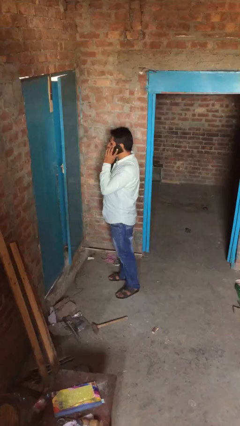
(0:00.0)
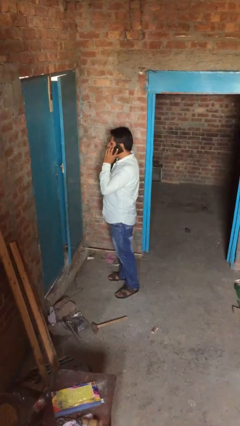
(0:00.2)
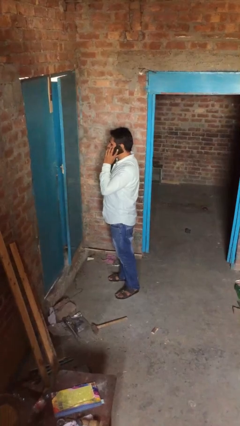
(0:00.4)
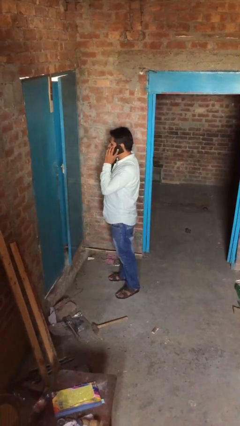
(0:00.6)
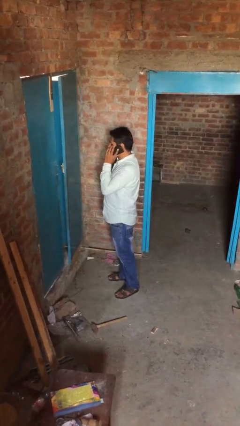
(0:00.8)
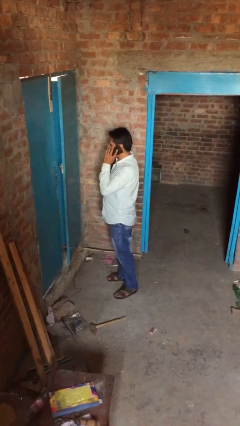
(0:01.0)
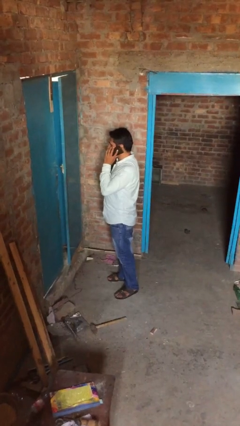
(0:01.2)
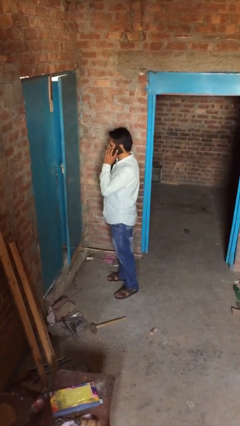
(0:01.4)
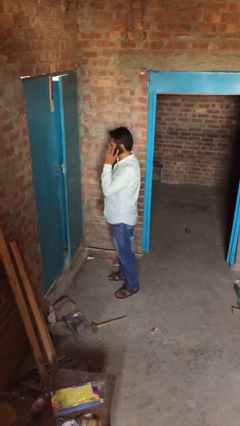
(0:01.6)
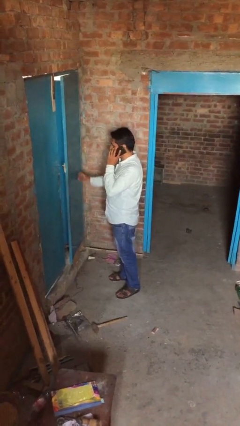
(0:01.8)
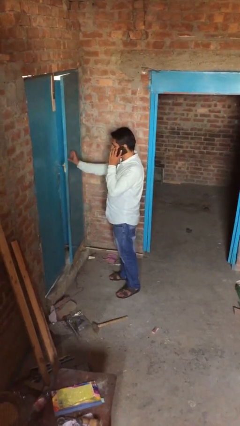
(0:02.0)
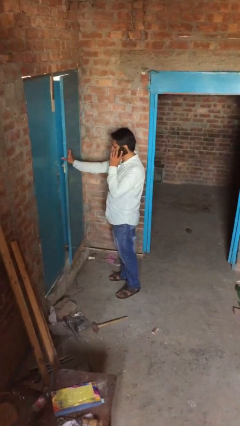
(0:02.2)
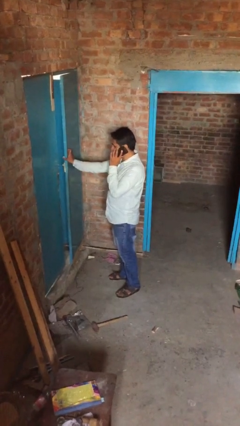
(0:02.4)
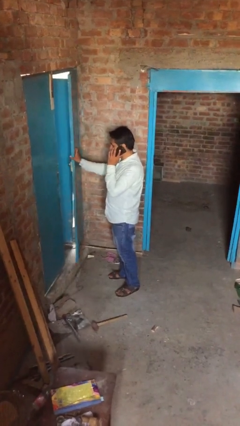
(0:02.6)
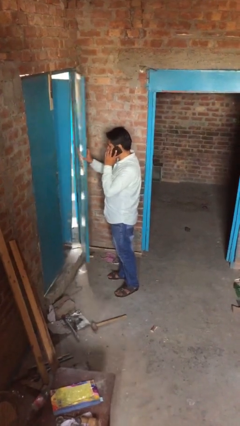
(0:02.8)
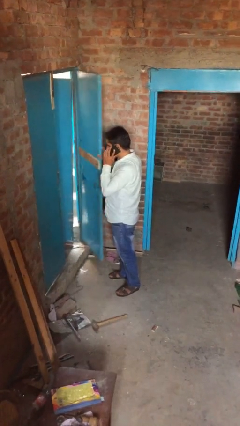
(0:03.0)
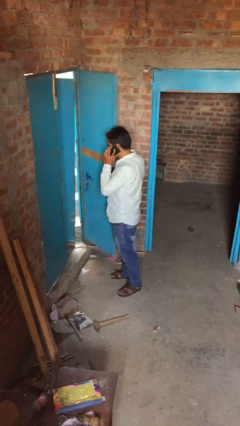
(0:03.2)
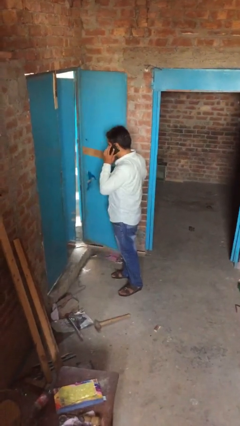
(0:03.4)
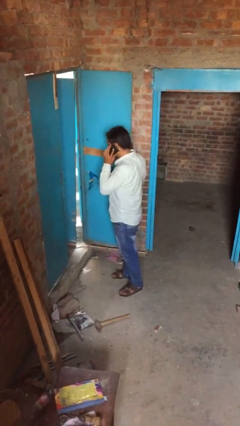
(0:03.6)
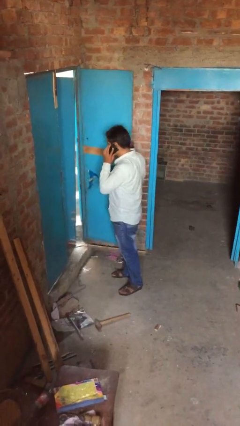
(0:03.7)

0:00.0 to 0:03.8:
person opens facility door

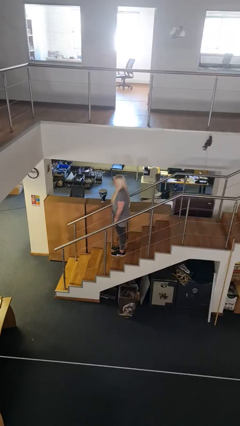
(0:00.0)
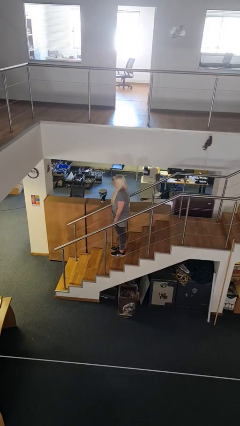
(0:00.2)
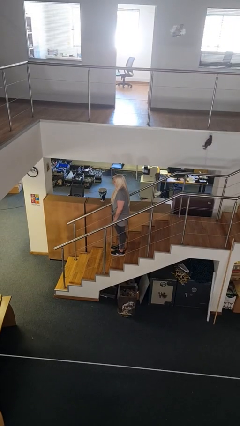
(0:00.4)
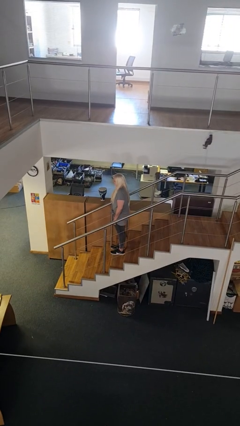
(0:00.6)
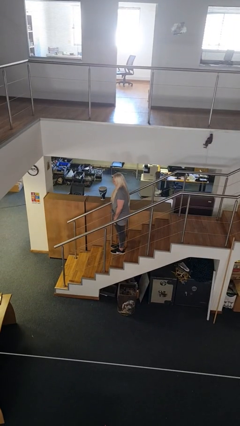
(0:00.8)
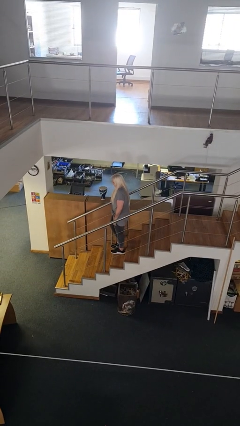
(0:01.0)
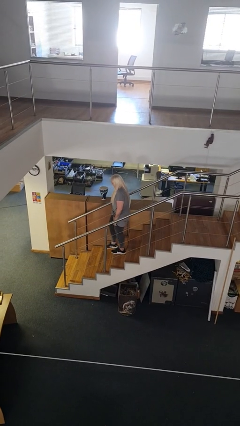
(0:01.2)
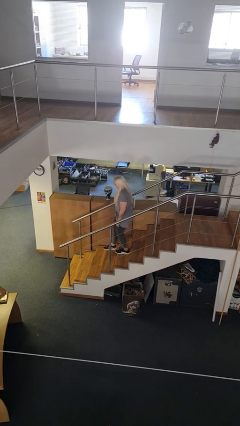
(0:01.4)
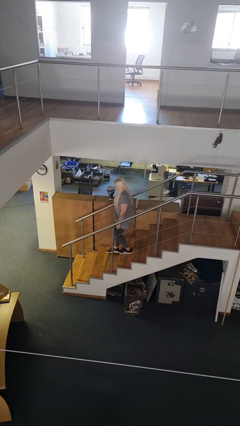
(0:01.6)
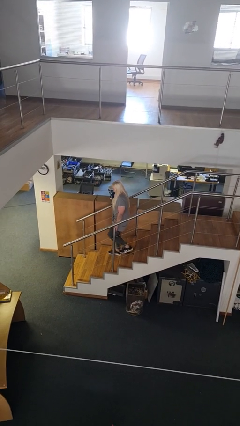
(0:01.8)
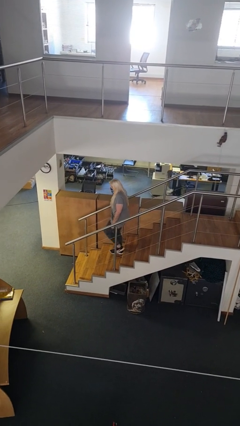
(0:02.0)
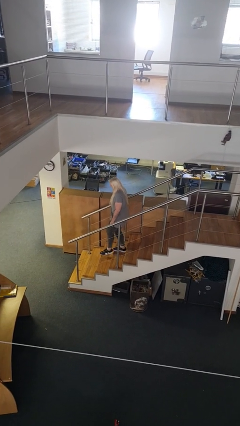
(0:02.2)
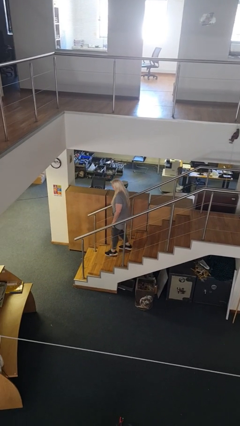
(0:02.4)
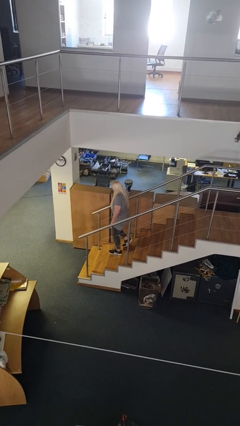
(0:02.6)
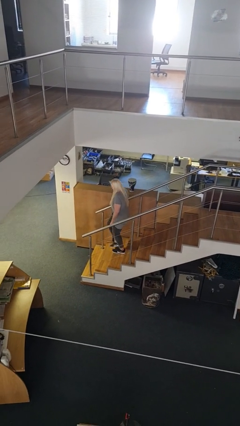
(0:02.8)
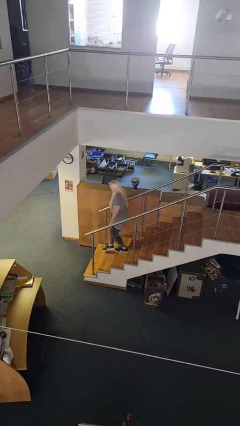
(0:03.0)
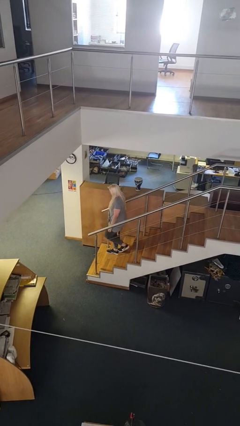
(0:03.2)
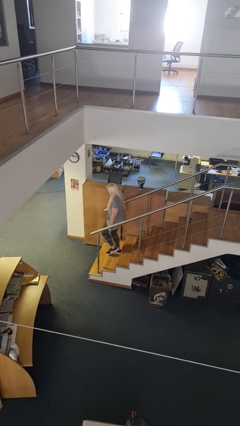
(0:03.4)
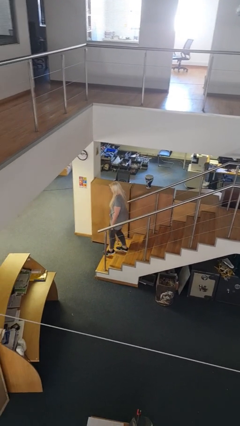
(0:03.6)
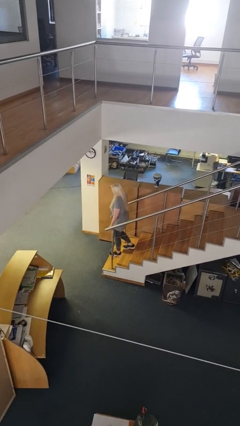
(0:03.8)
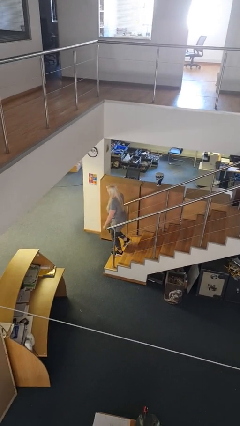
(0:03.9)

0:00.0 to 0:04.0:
person climbs down stairs

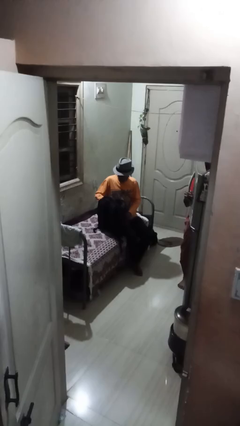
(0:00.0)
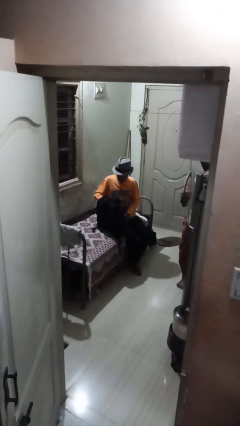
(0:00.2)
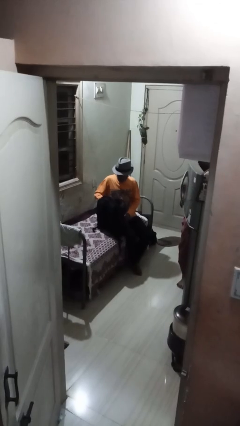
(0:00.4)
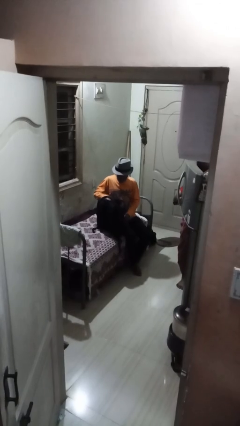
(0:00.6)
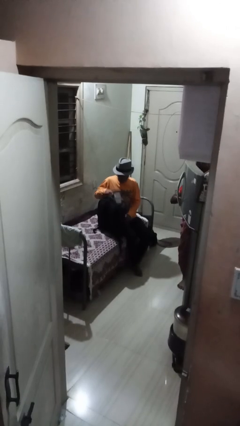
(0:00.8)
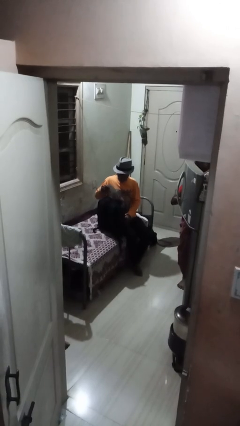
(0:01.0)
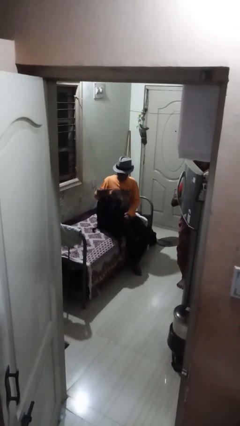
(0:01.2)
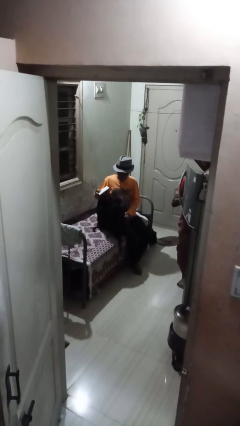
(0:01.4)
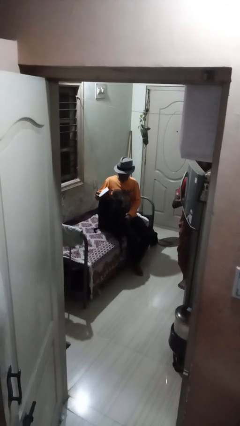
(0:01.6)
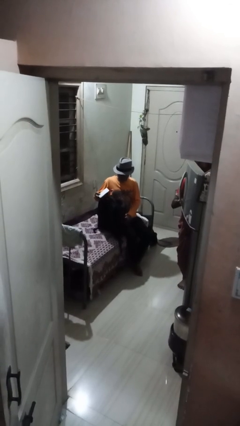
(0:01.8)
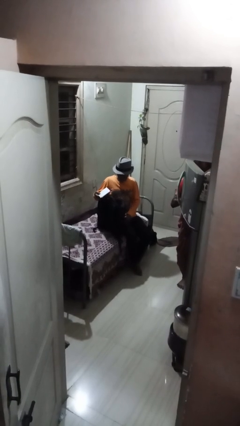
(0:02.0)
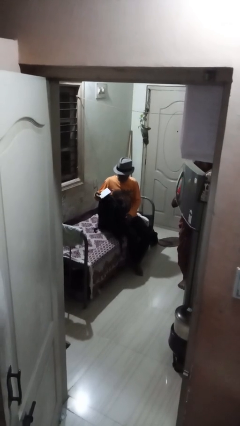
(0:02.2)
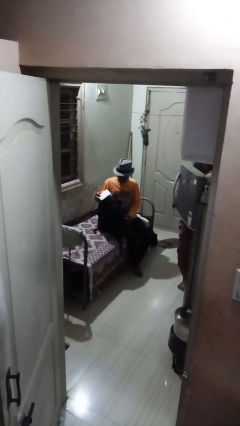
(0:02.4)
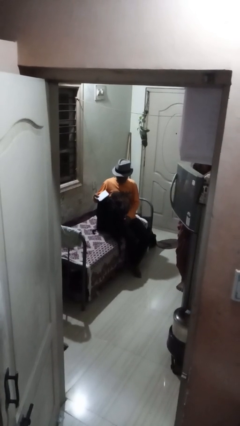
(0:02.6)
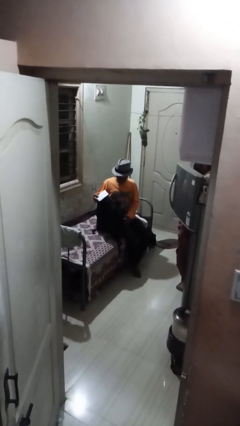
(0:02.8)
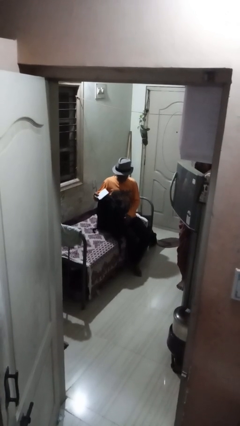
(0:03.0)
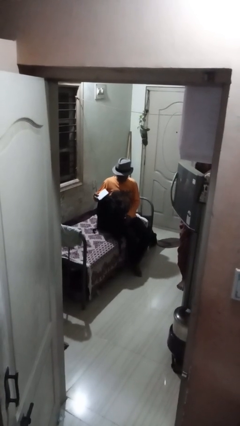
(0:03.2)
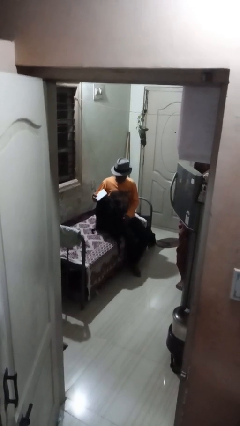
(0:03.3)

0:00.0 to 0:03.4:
person takes object from backpack

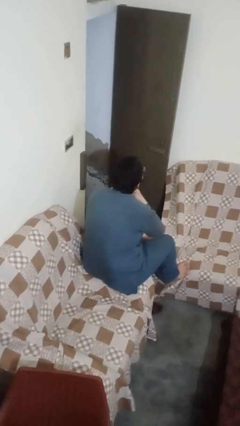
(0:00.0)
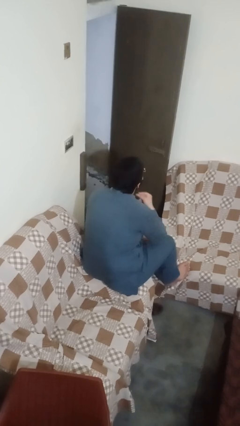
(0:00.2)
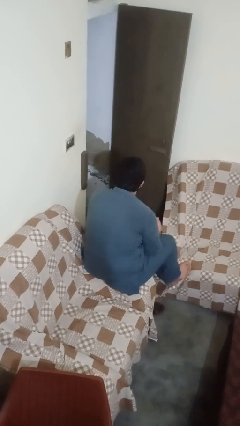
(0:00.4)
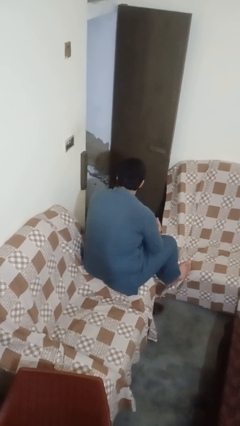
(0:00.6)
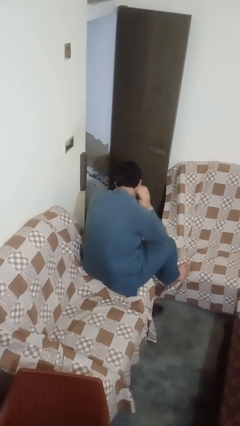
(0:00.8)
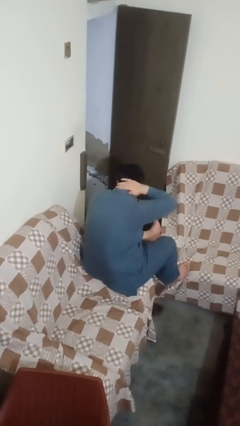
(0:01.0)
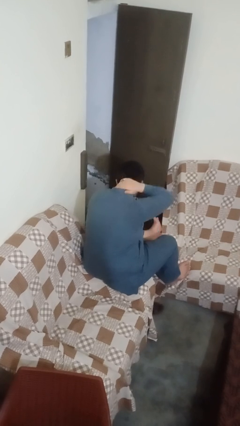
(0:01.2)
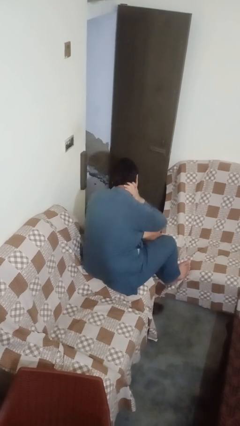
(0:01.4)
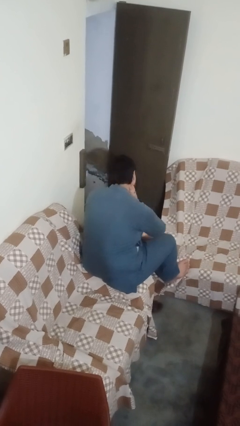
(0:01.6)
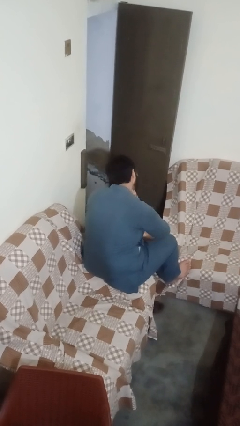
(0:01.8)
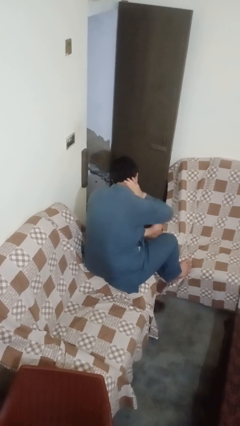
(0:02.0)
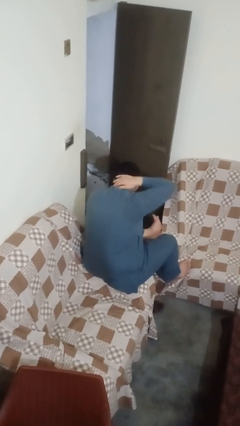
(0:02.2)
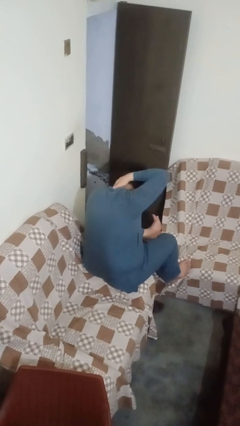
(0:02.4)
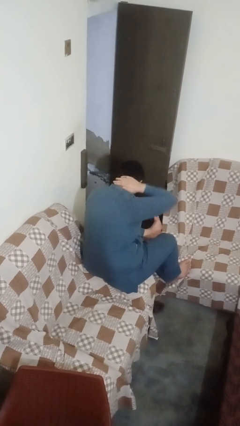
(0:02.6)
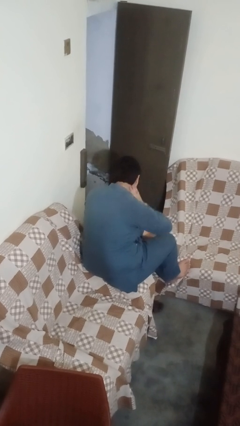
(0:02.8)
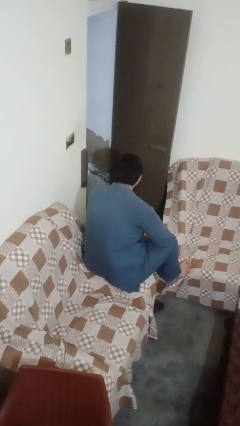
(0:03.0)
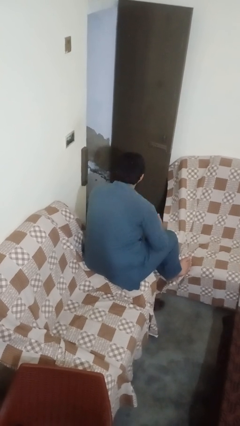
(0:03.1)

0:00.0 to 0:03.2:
person rubs neck

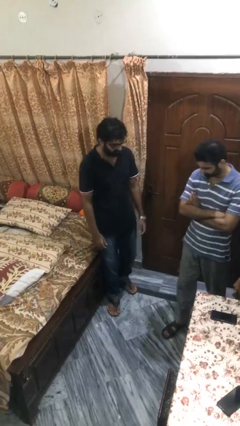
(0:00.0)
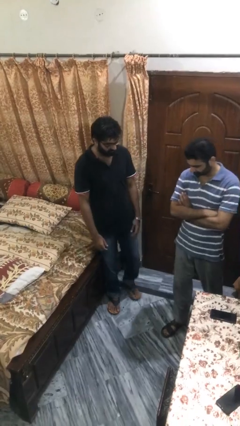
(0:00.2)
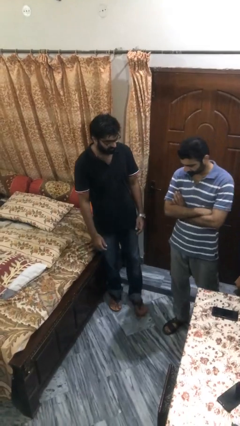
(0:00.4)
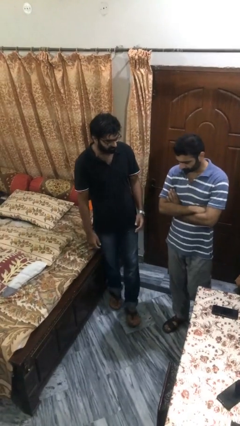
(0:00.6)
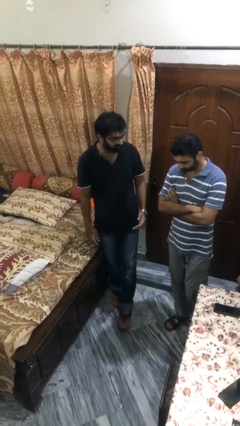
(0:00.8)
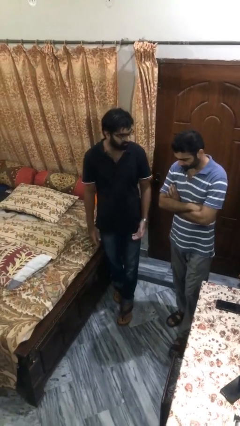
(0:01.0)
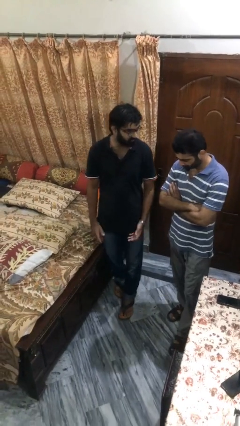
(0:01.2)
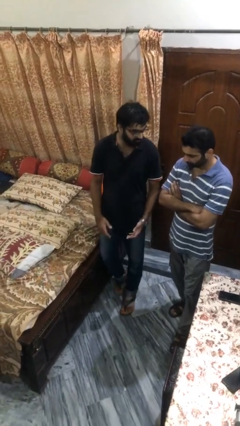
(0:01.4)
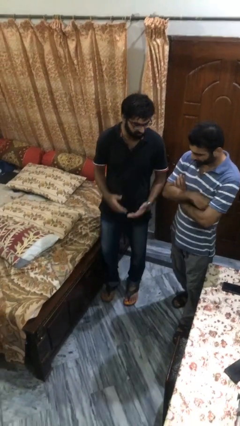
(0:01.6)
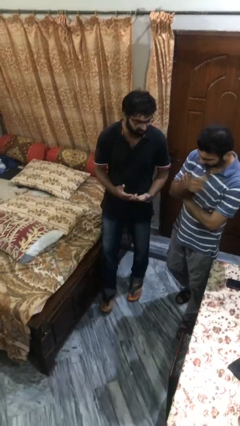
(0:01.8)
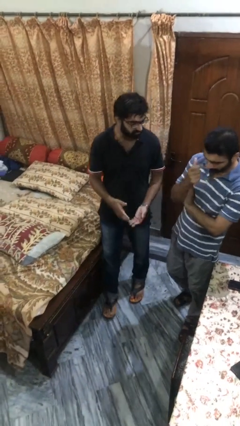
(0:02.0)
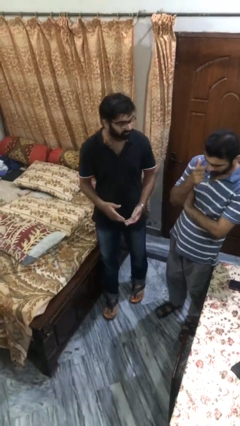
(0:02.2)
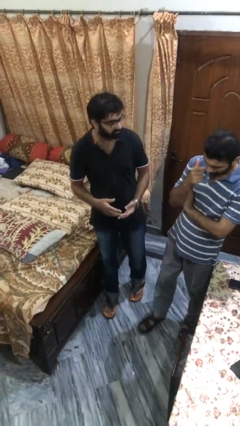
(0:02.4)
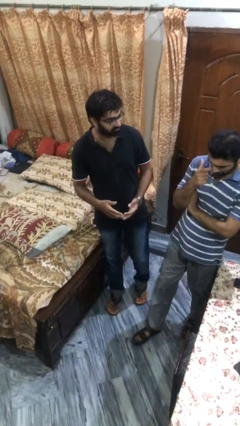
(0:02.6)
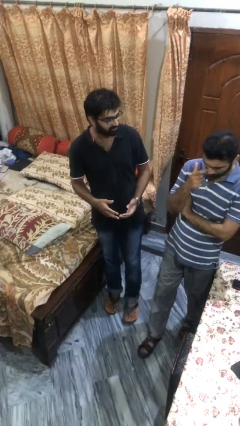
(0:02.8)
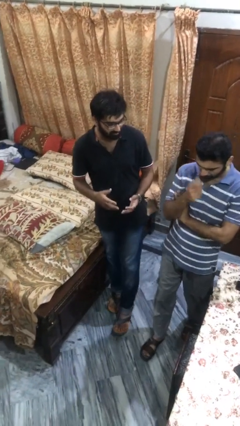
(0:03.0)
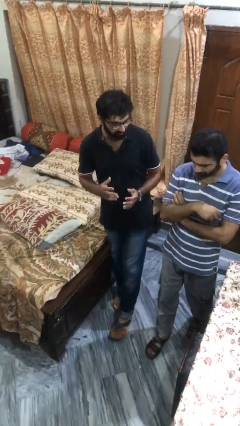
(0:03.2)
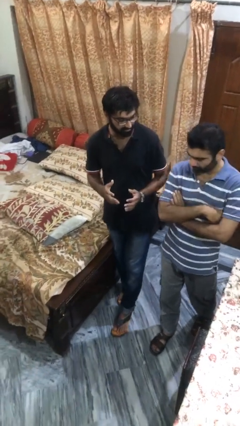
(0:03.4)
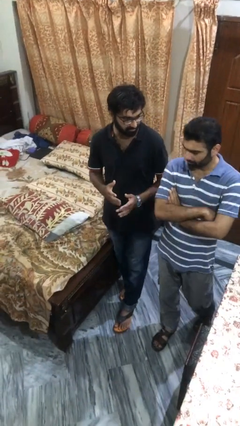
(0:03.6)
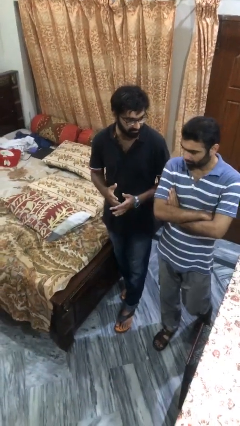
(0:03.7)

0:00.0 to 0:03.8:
person talks to person
